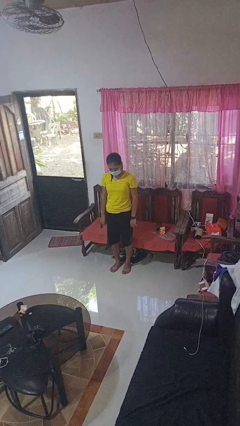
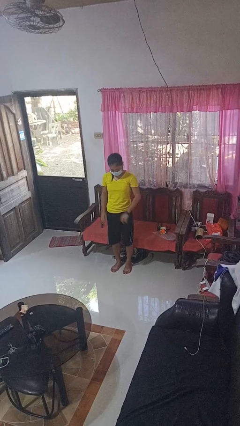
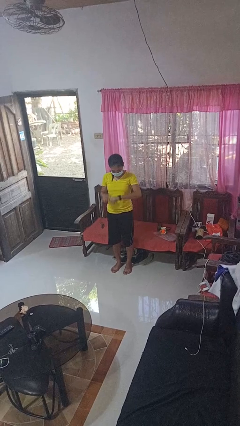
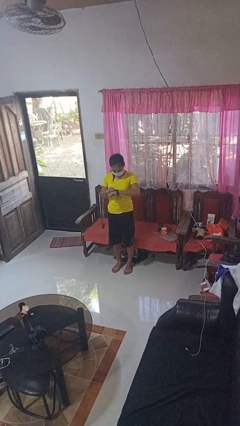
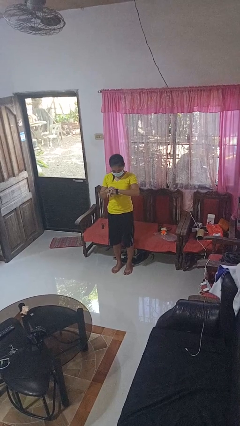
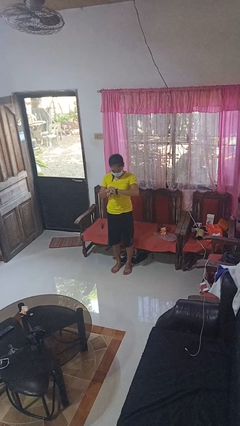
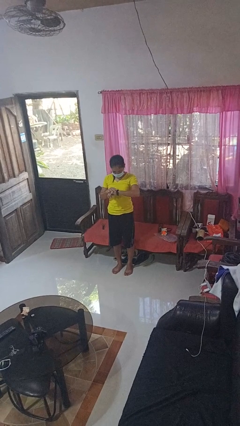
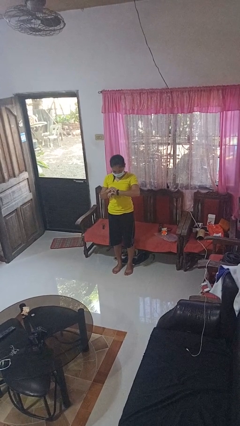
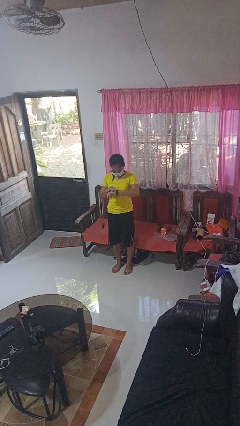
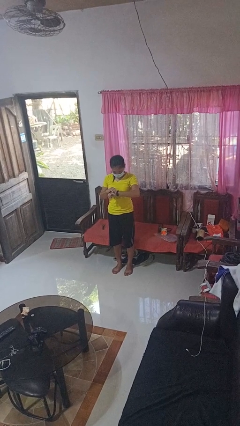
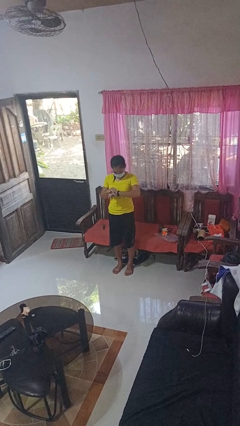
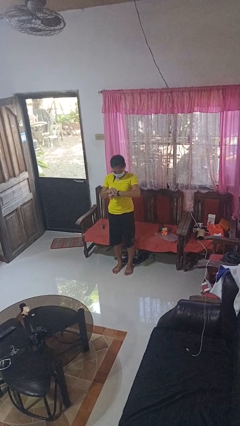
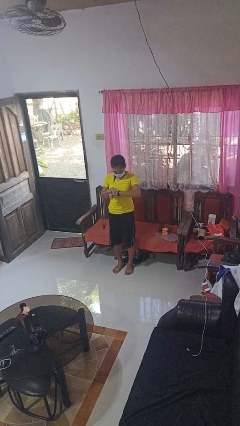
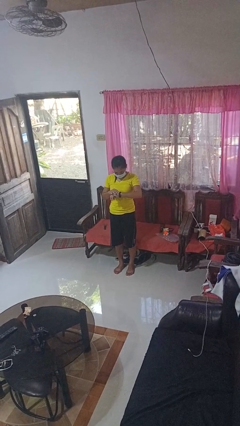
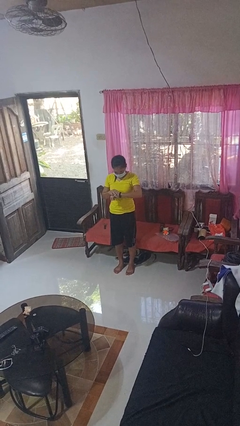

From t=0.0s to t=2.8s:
person looks at wristwatch

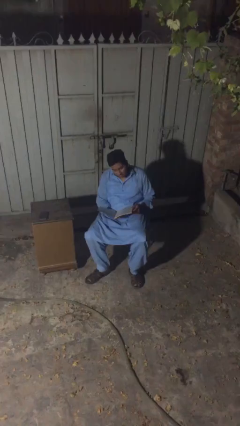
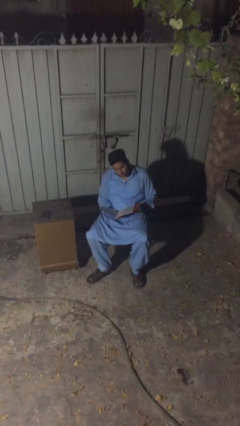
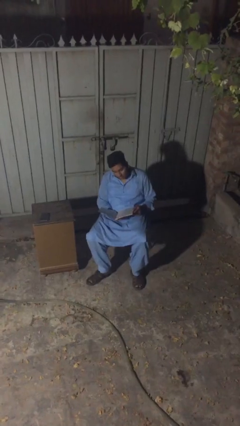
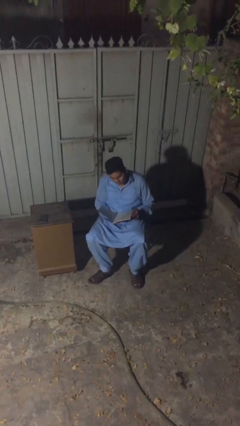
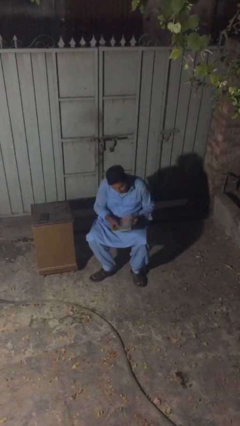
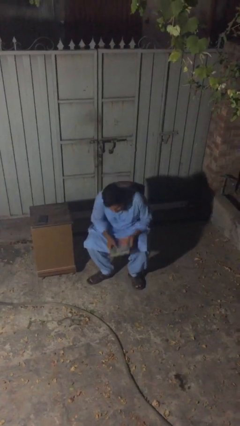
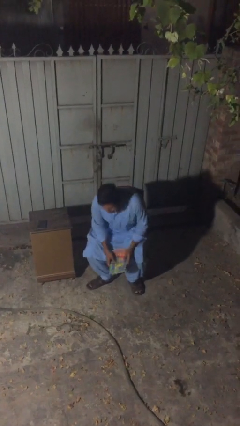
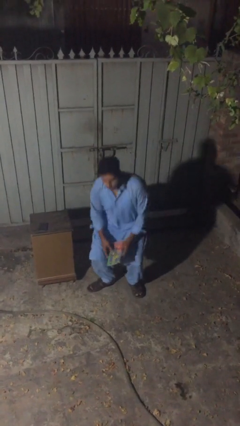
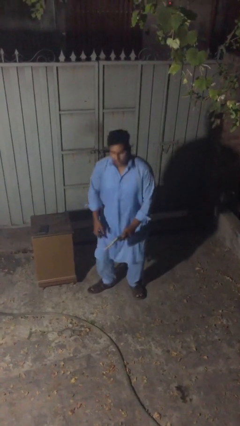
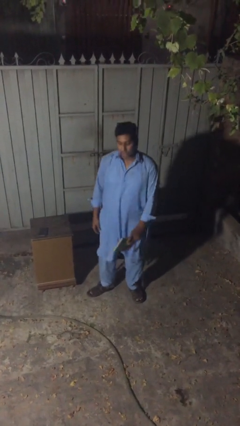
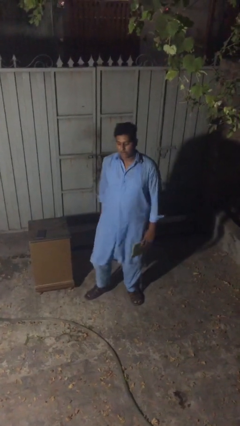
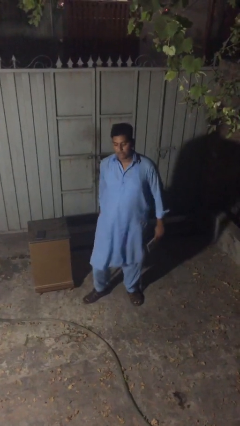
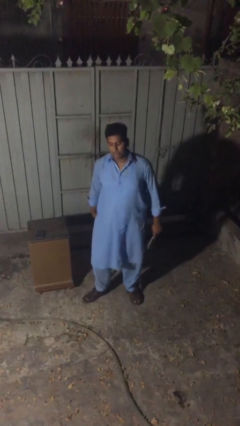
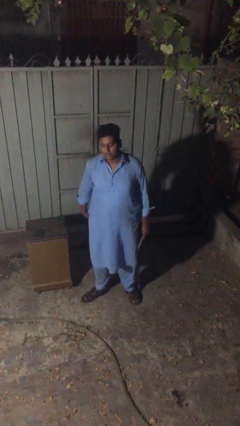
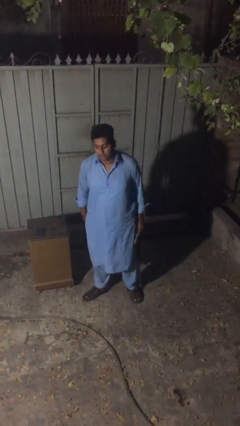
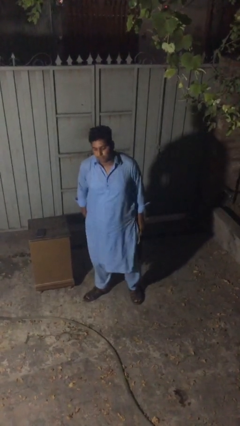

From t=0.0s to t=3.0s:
person stands up

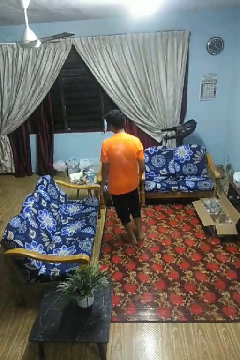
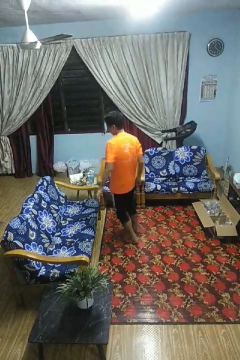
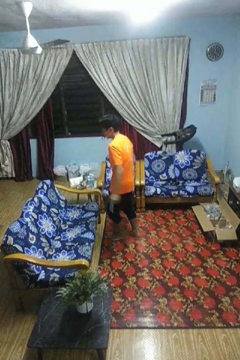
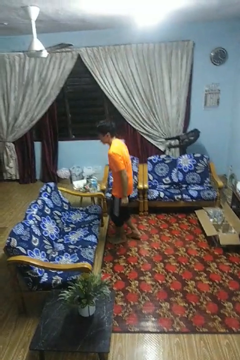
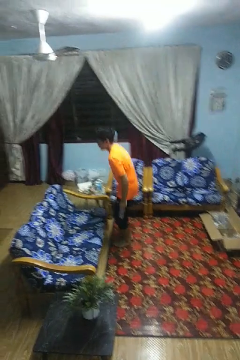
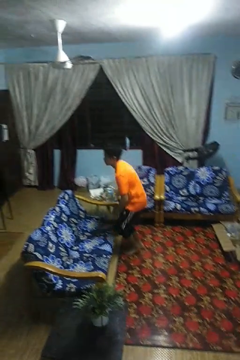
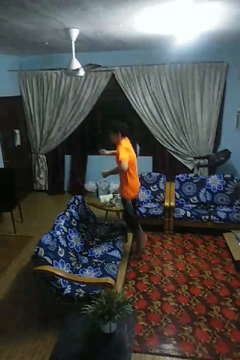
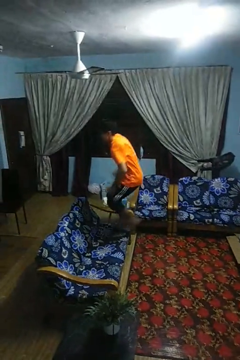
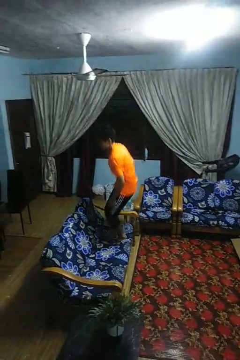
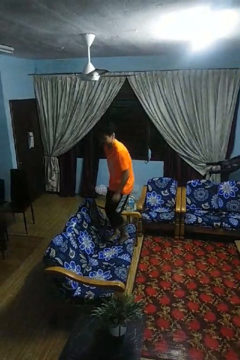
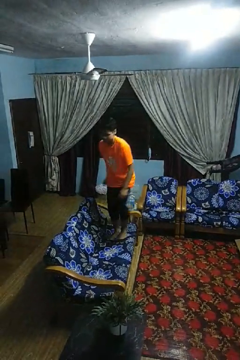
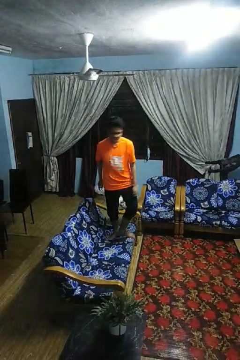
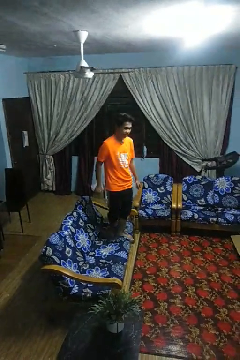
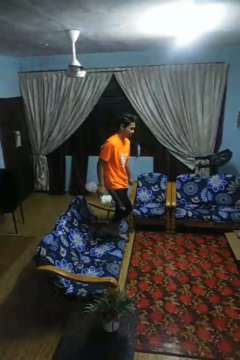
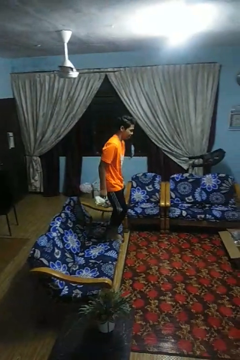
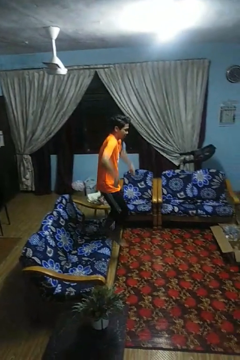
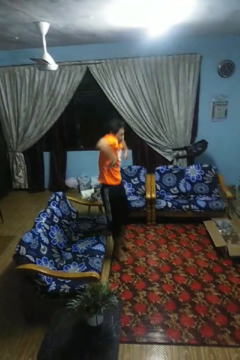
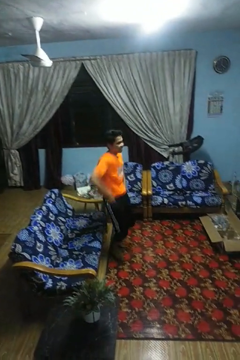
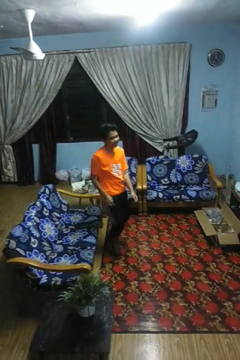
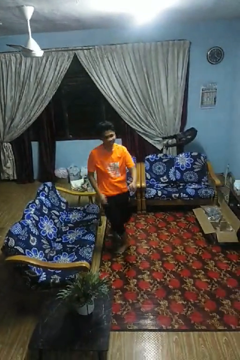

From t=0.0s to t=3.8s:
person jumps on couch

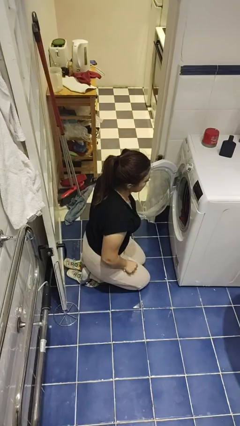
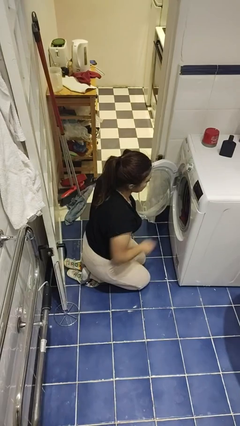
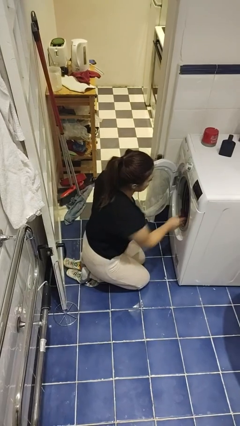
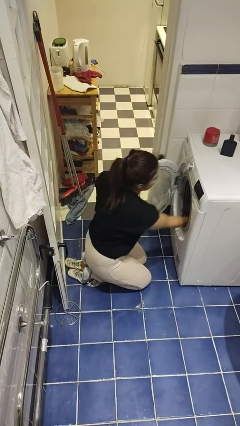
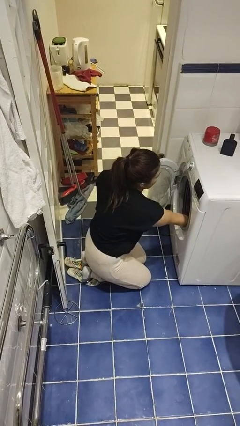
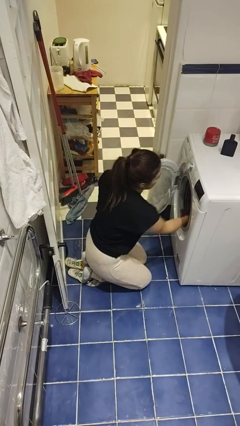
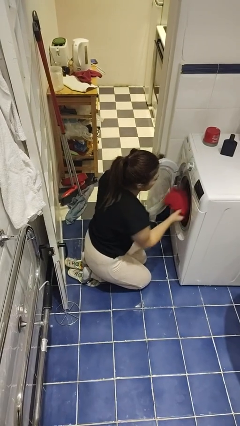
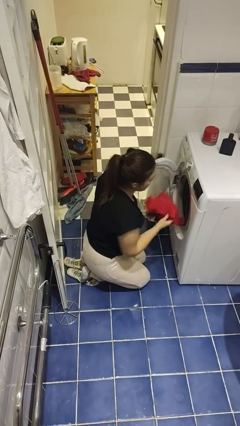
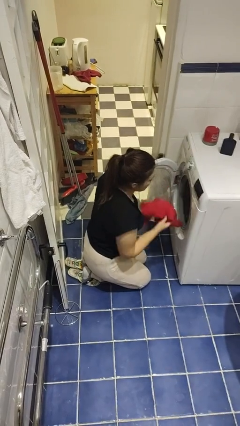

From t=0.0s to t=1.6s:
person unloads dryer

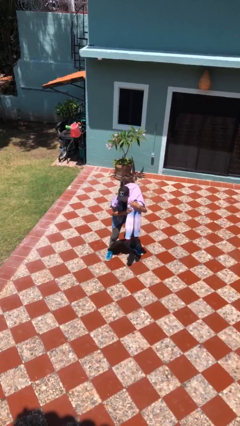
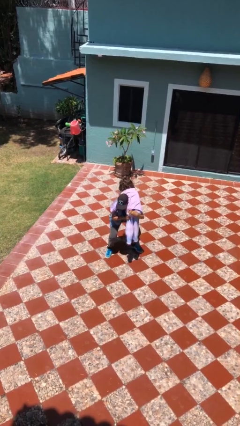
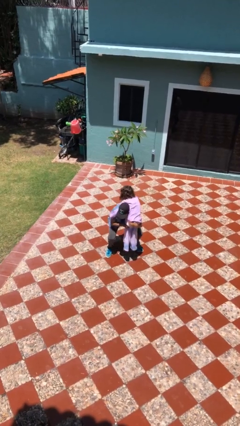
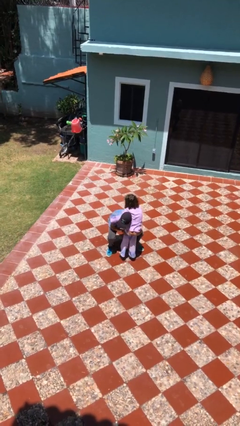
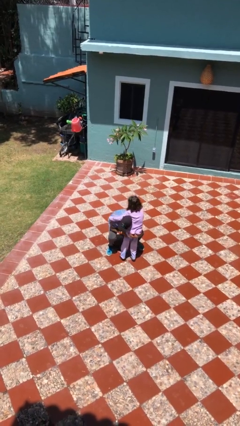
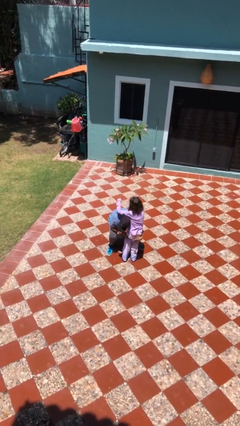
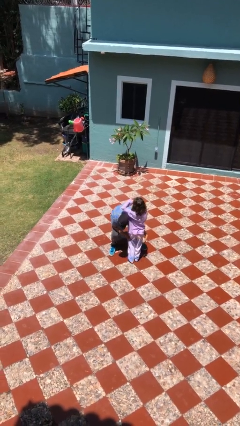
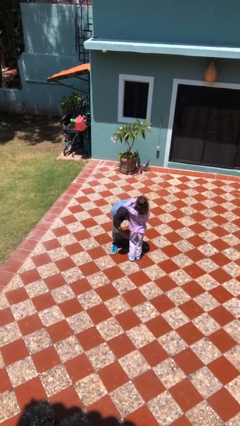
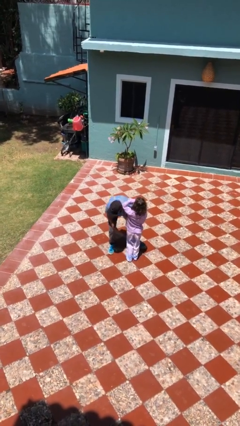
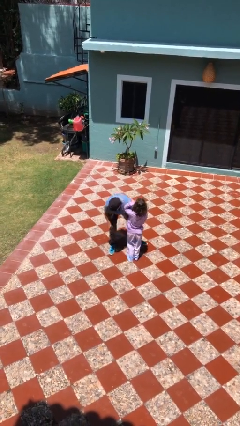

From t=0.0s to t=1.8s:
person puts down person

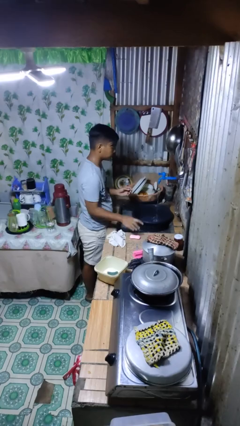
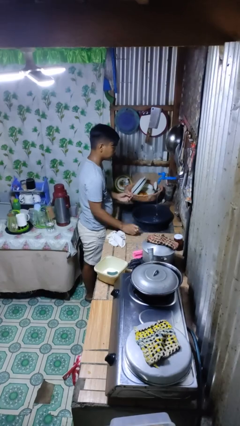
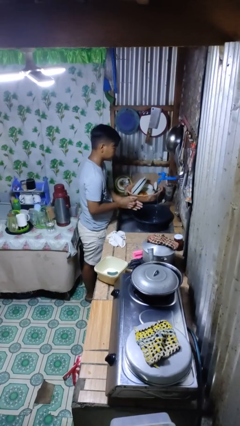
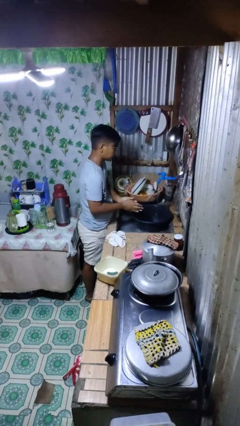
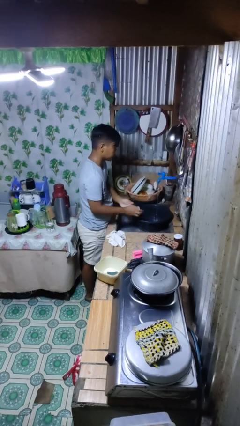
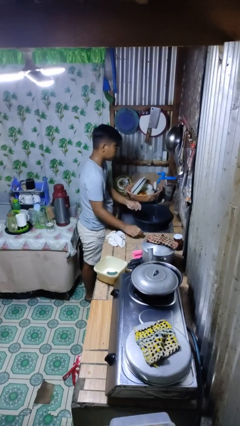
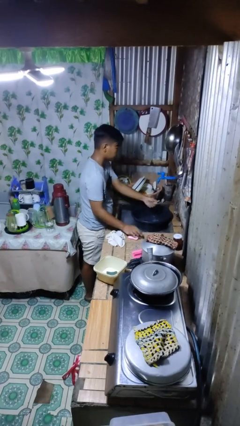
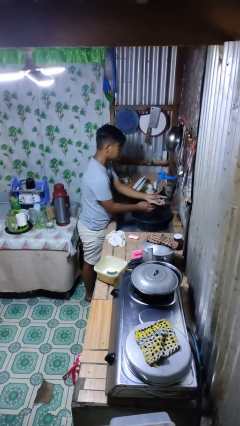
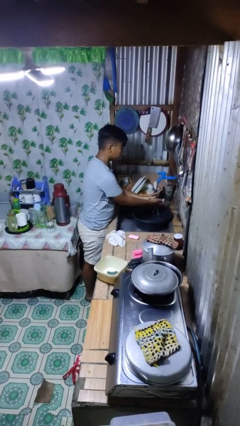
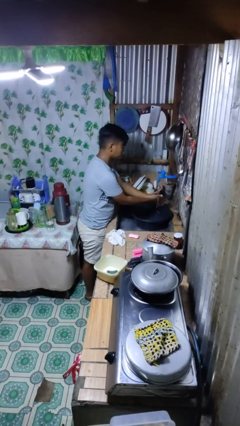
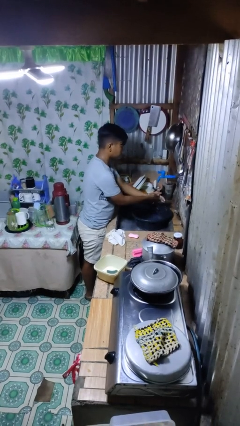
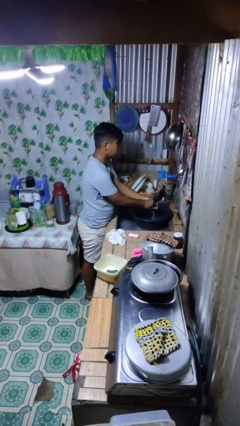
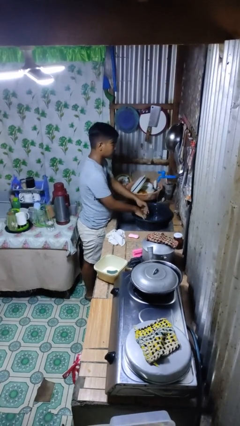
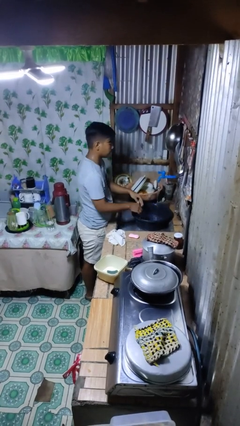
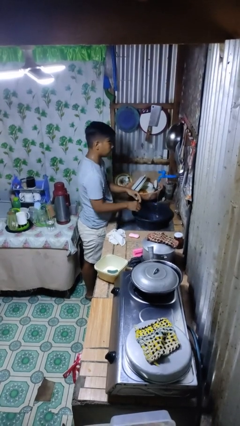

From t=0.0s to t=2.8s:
person washes hands

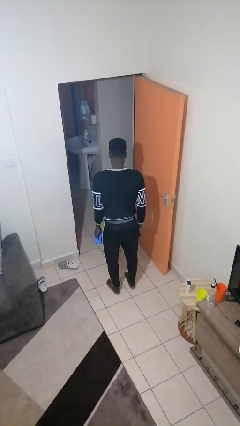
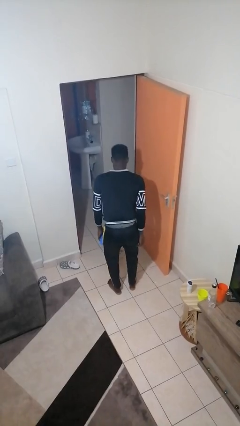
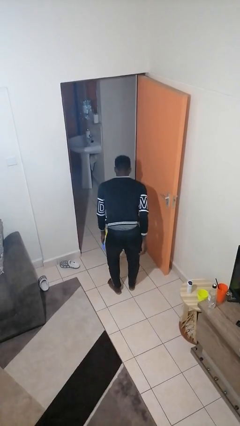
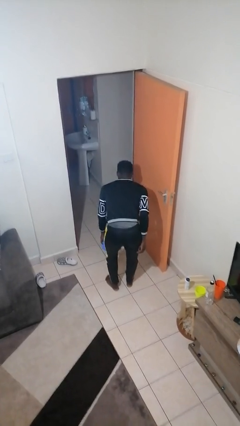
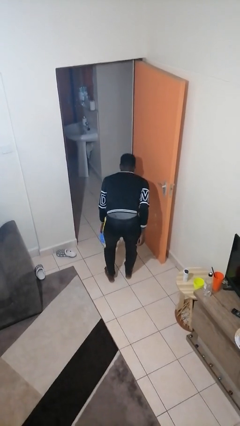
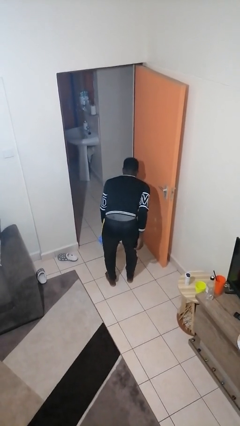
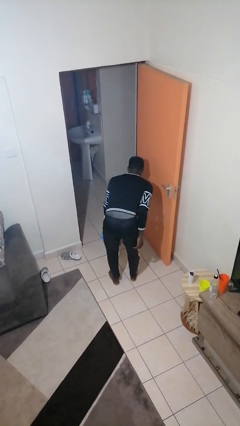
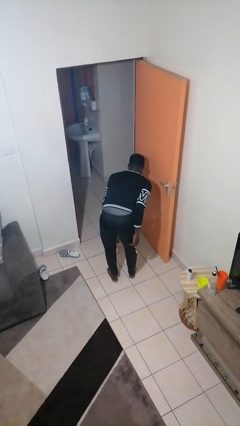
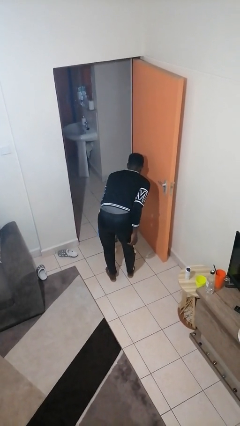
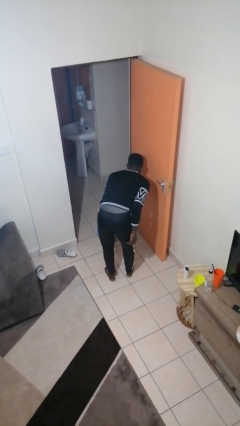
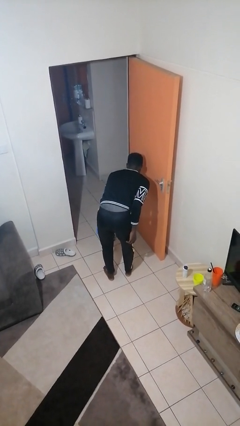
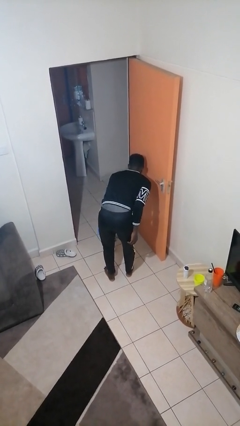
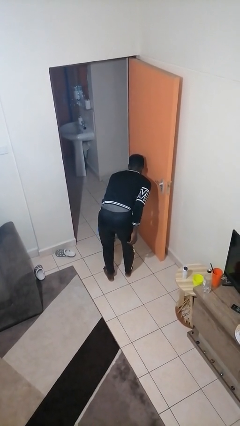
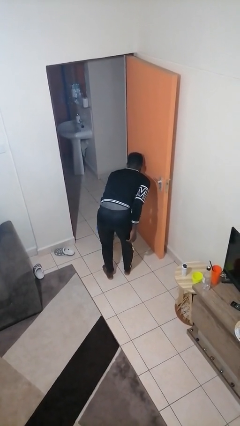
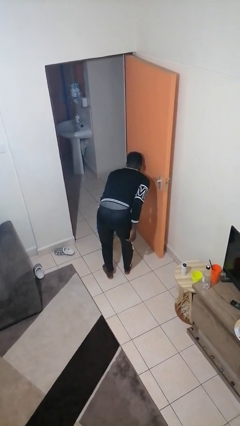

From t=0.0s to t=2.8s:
person waters houseplant
